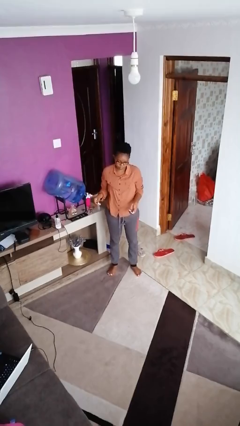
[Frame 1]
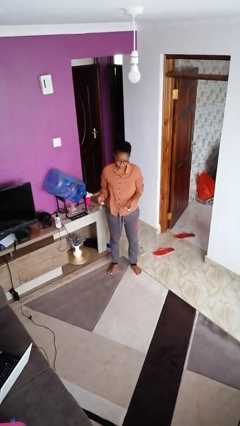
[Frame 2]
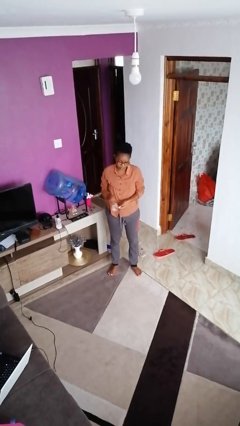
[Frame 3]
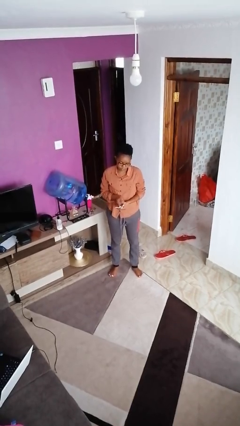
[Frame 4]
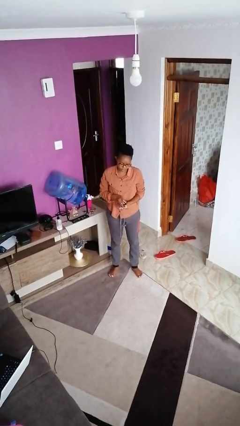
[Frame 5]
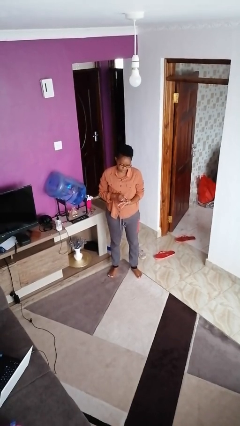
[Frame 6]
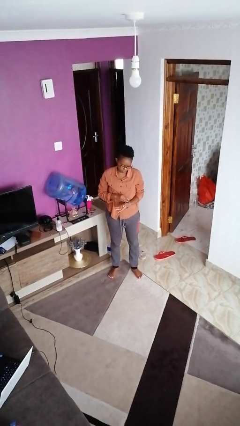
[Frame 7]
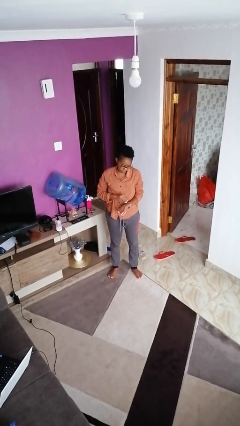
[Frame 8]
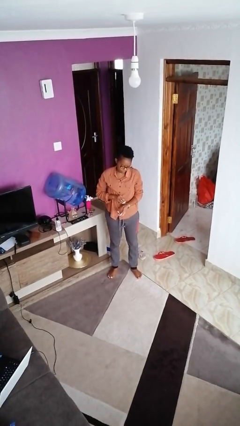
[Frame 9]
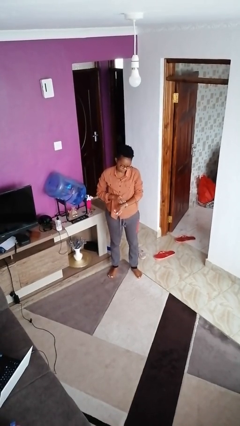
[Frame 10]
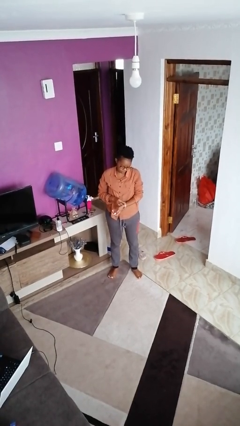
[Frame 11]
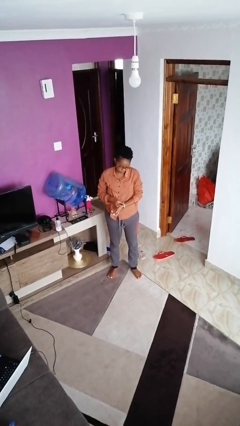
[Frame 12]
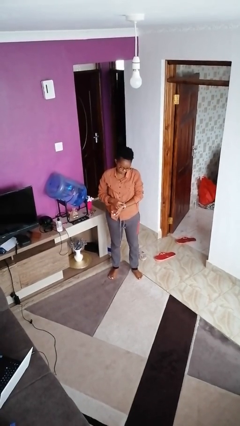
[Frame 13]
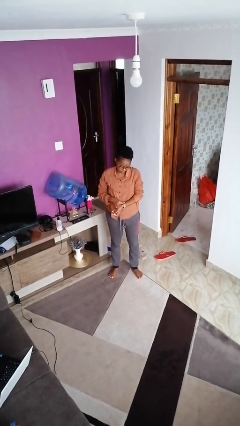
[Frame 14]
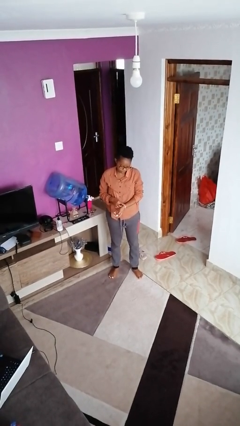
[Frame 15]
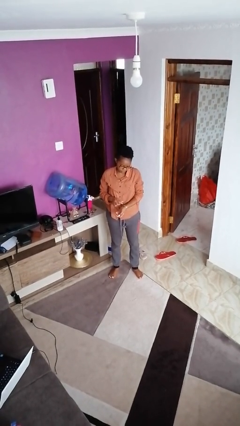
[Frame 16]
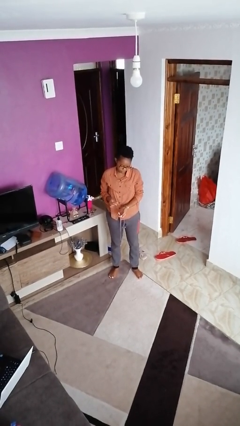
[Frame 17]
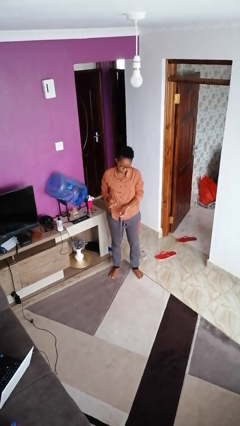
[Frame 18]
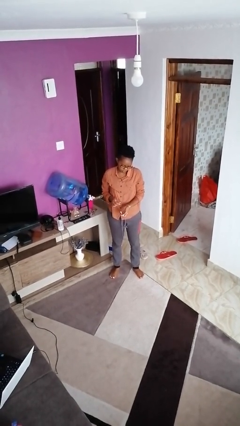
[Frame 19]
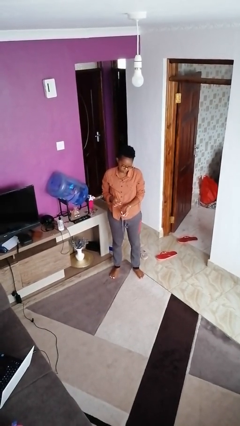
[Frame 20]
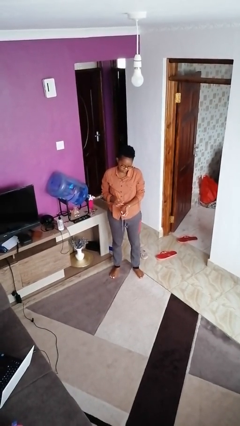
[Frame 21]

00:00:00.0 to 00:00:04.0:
person puts on wristwatch

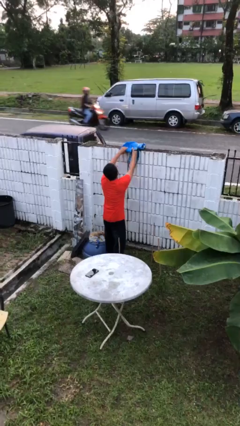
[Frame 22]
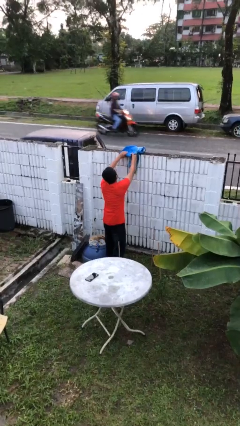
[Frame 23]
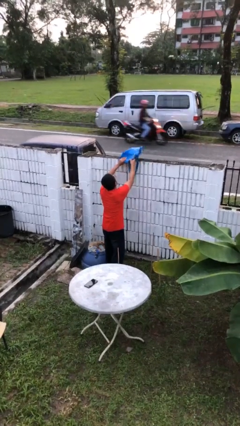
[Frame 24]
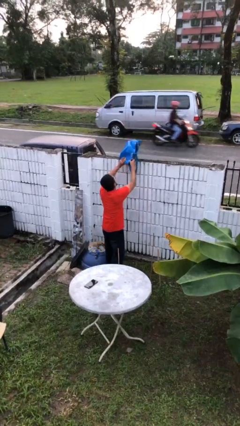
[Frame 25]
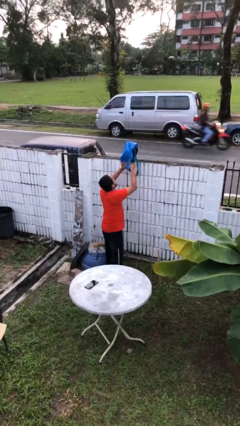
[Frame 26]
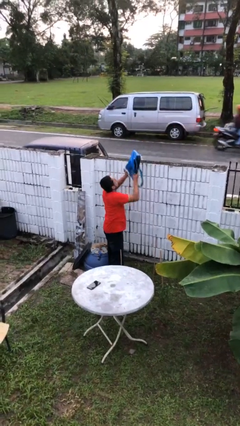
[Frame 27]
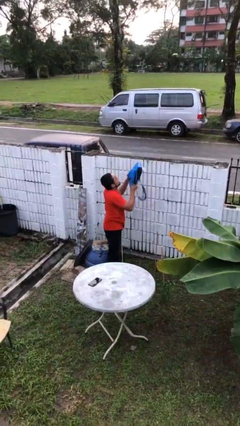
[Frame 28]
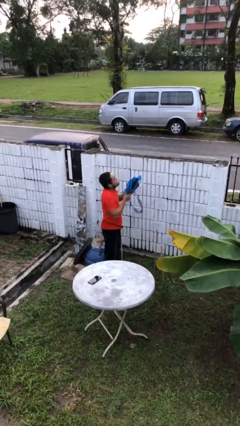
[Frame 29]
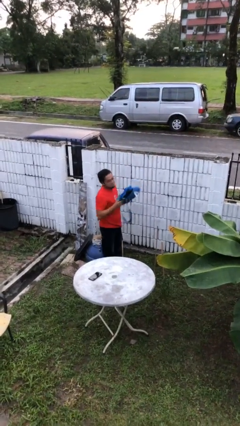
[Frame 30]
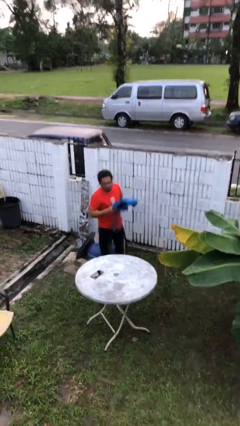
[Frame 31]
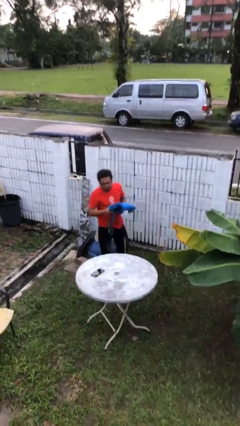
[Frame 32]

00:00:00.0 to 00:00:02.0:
person picks up object from shelf

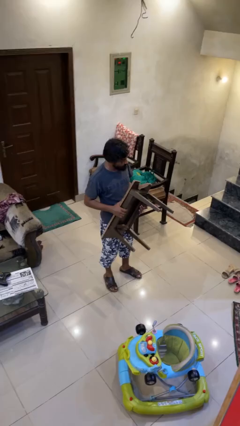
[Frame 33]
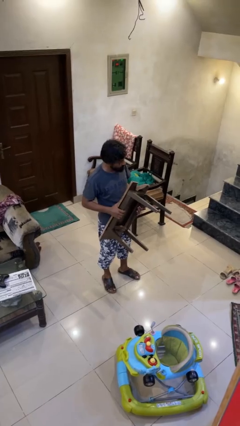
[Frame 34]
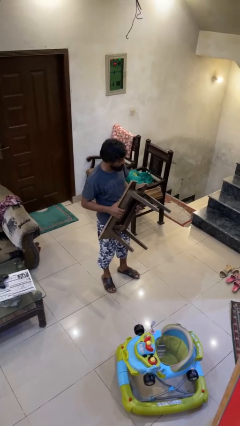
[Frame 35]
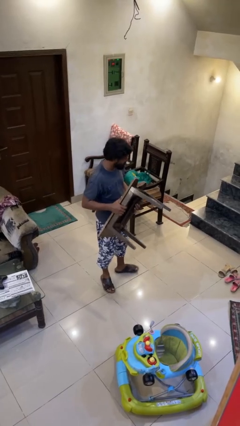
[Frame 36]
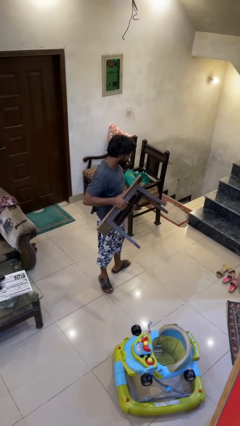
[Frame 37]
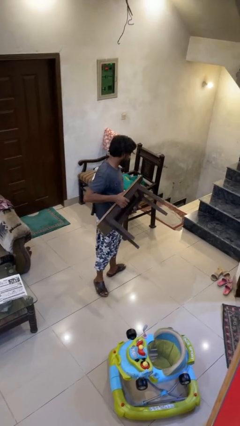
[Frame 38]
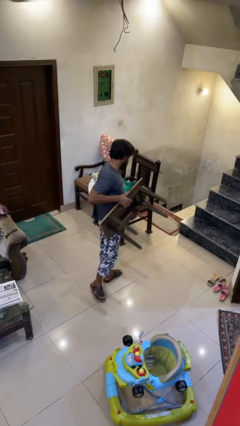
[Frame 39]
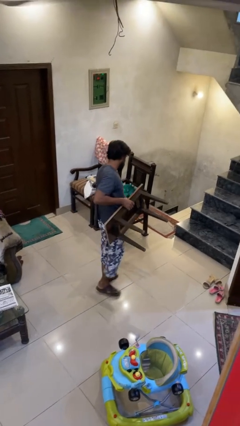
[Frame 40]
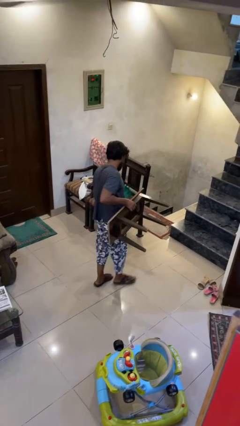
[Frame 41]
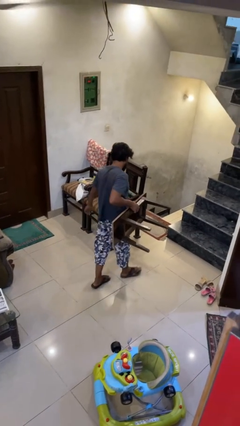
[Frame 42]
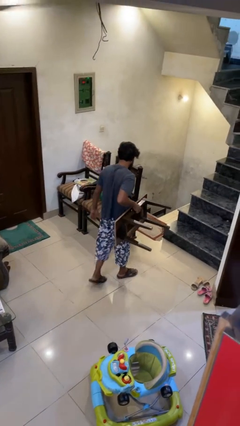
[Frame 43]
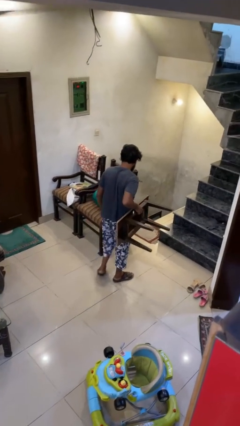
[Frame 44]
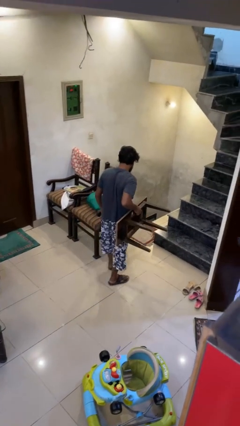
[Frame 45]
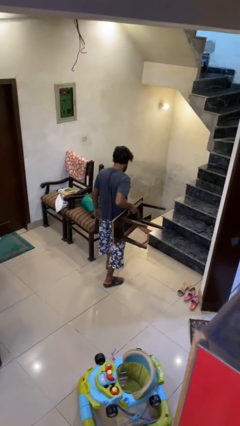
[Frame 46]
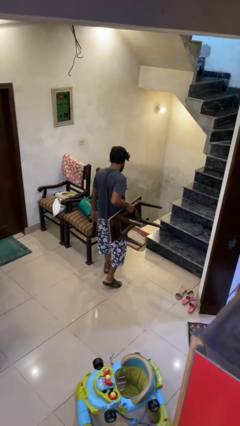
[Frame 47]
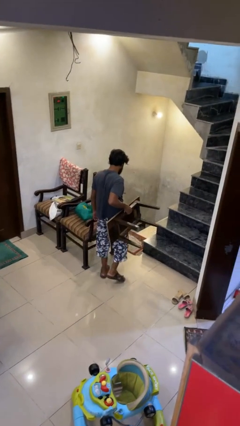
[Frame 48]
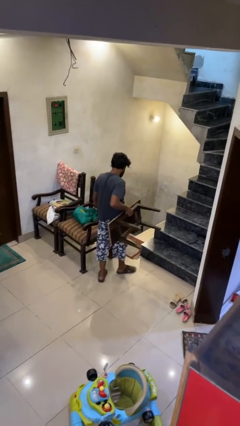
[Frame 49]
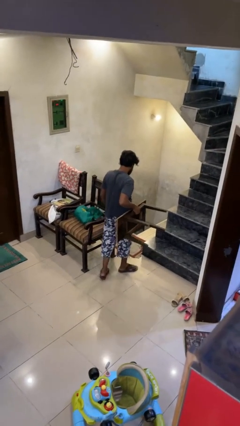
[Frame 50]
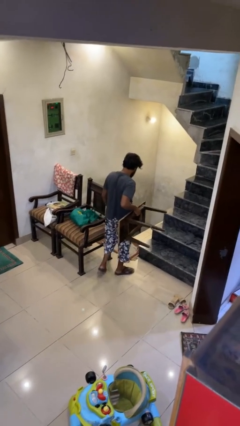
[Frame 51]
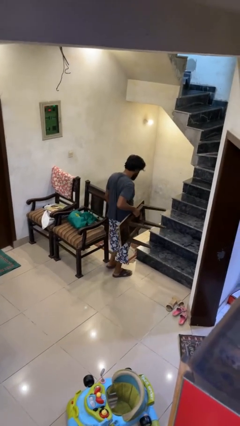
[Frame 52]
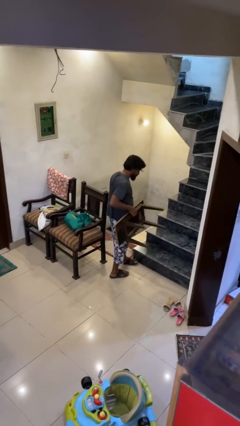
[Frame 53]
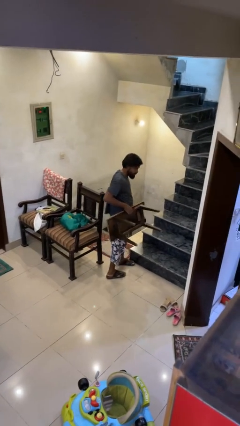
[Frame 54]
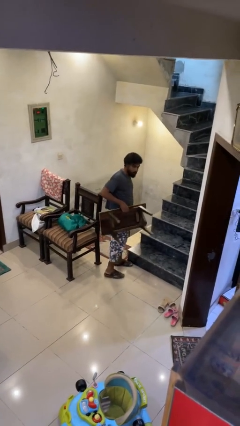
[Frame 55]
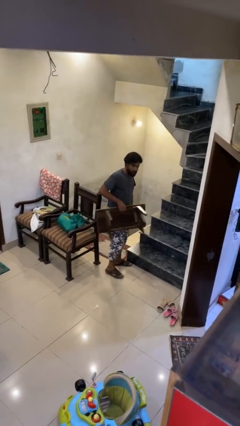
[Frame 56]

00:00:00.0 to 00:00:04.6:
person carries furniture

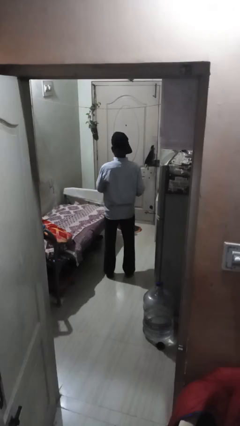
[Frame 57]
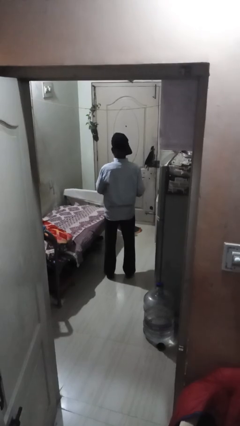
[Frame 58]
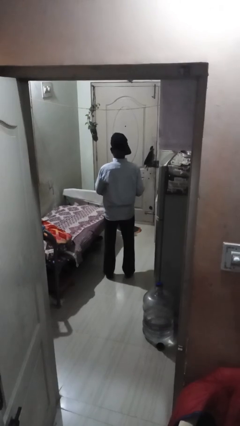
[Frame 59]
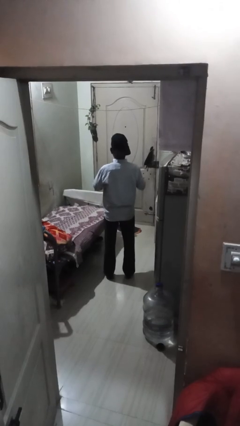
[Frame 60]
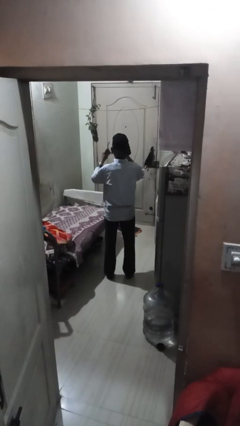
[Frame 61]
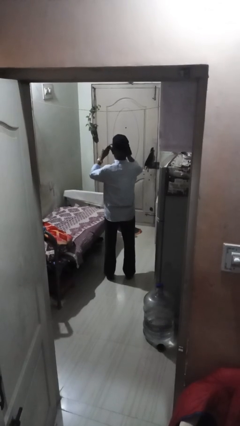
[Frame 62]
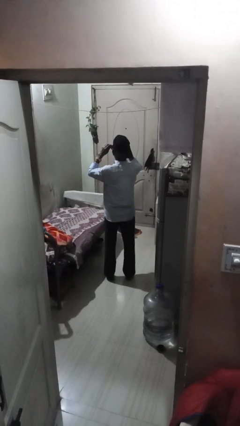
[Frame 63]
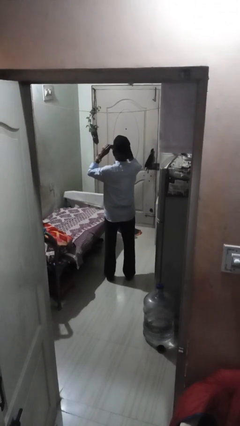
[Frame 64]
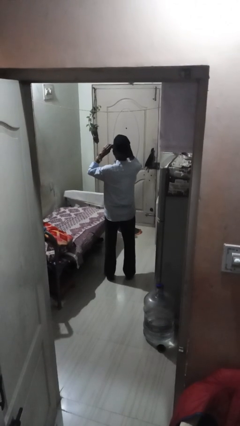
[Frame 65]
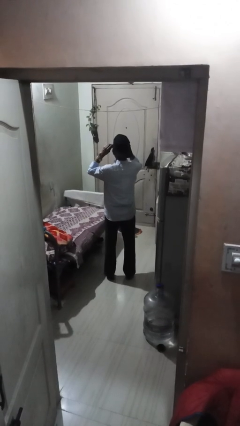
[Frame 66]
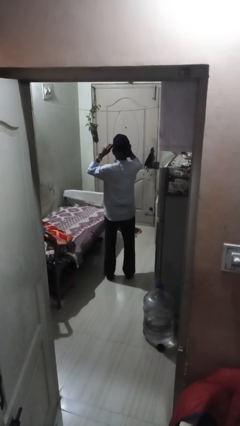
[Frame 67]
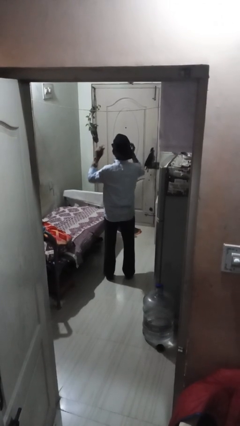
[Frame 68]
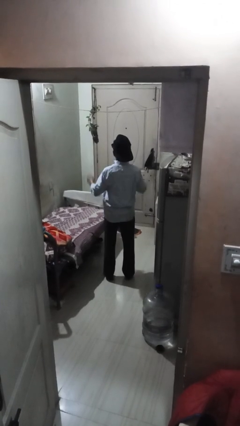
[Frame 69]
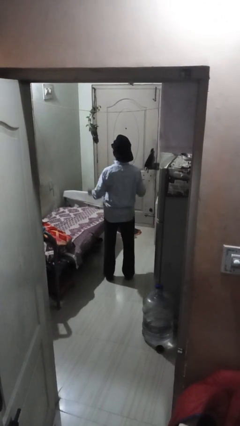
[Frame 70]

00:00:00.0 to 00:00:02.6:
person puts on sunglasses

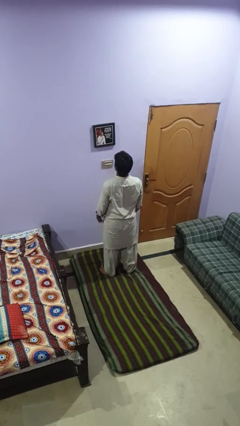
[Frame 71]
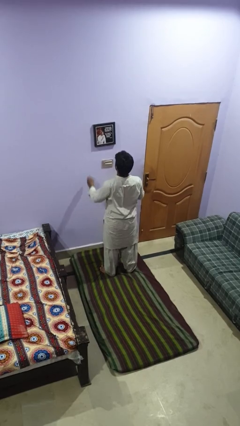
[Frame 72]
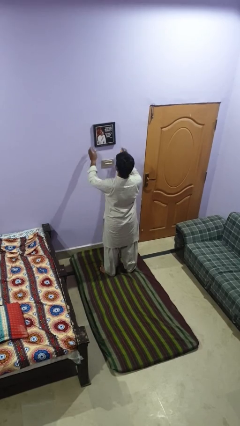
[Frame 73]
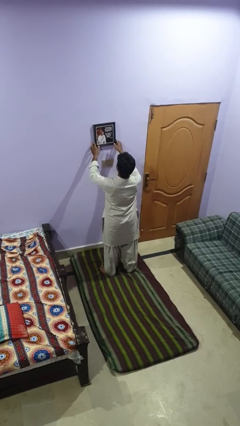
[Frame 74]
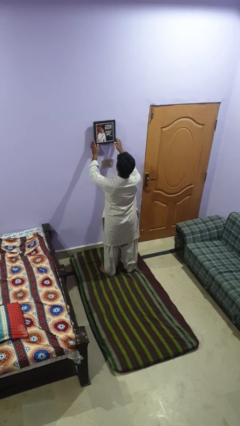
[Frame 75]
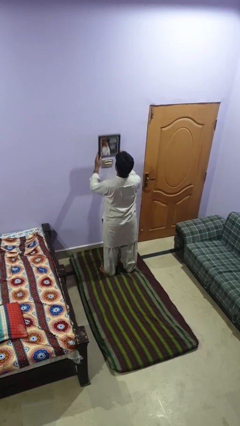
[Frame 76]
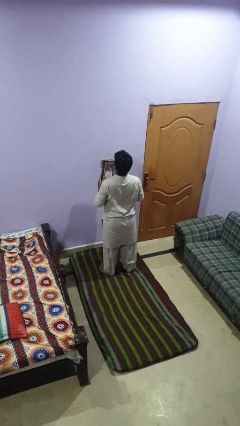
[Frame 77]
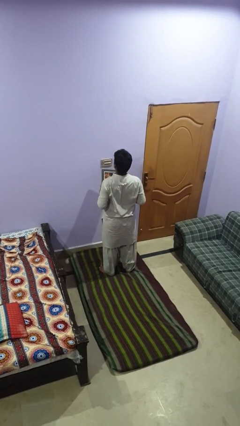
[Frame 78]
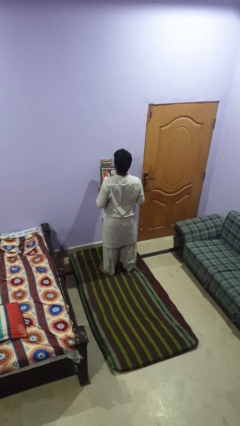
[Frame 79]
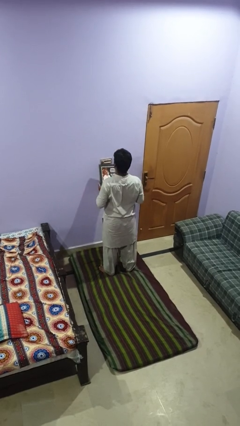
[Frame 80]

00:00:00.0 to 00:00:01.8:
person takes down picture frame

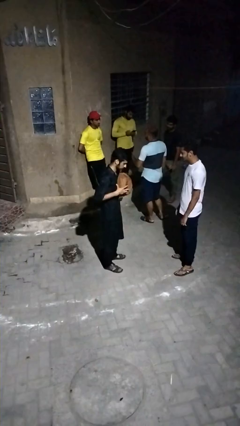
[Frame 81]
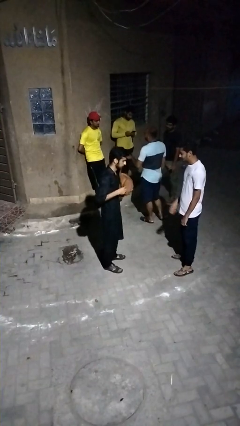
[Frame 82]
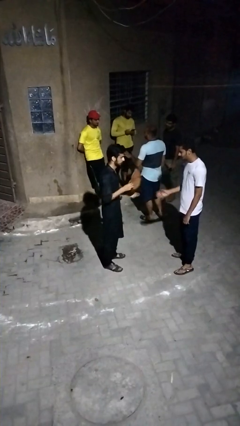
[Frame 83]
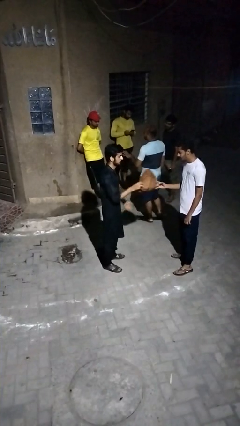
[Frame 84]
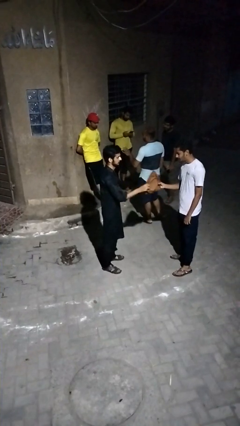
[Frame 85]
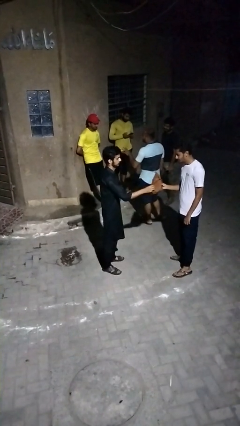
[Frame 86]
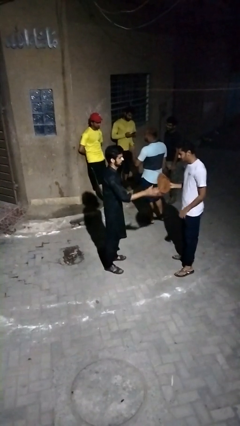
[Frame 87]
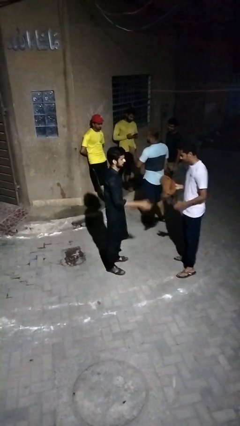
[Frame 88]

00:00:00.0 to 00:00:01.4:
person transfers object to person

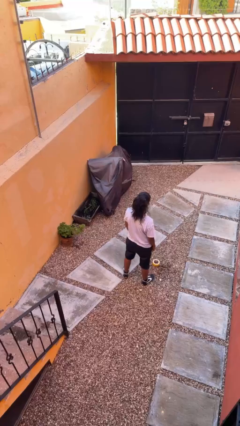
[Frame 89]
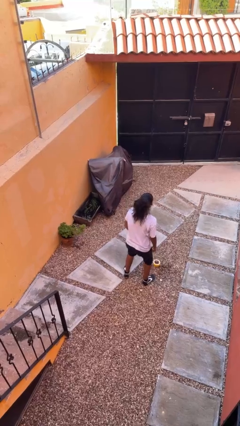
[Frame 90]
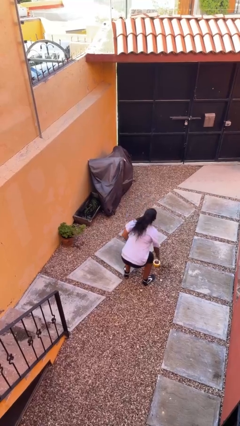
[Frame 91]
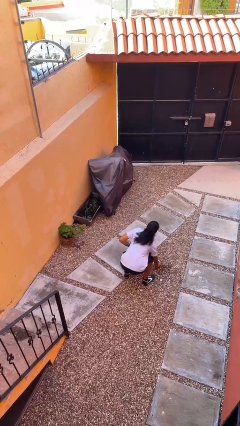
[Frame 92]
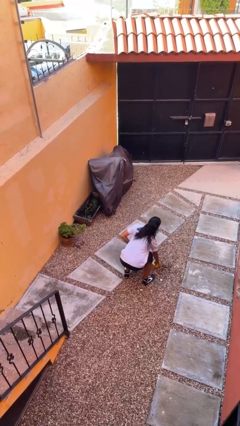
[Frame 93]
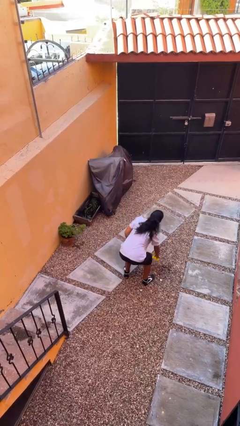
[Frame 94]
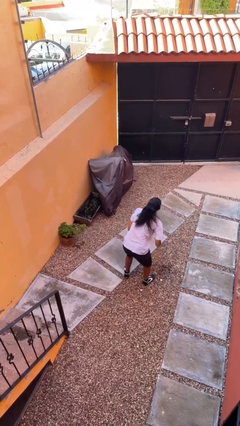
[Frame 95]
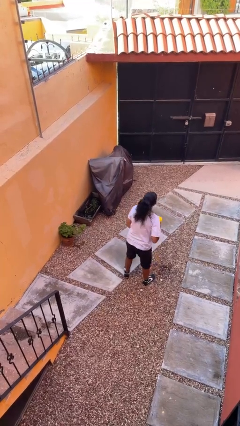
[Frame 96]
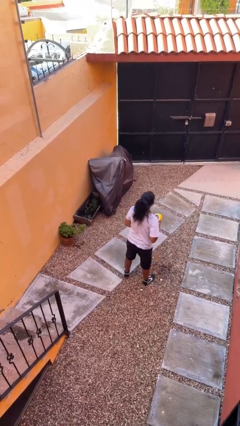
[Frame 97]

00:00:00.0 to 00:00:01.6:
person picks up object from floor
